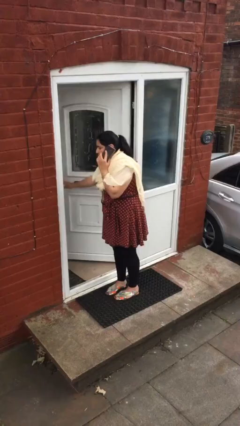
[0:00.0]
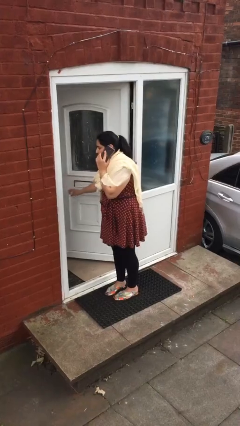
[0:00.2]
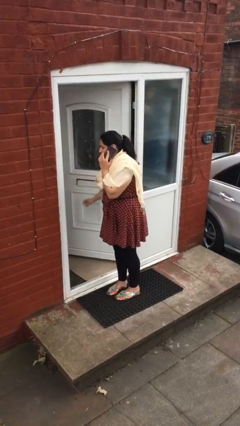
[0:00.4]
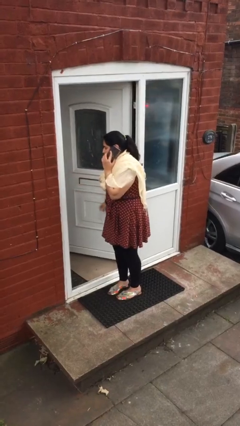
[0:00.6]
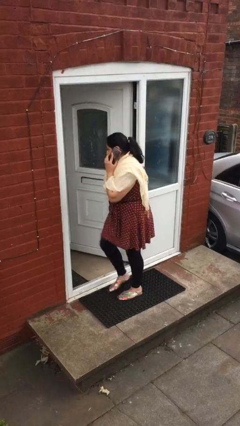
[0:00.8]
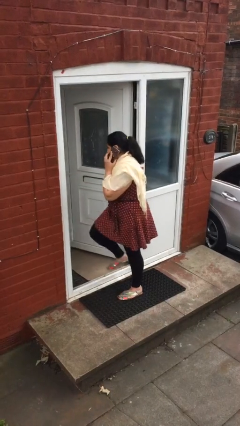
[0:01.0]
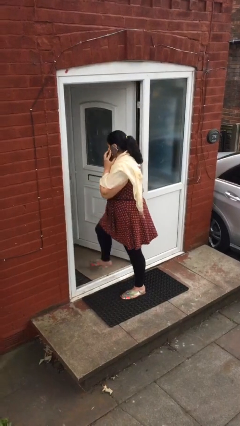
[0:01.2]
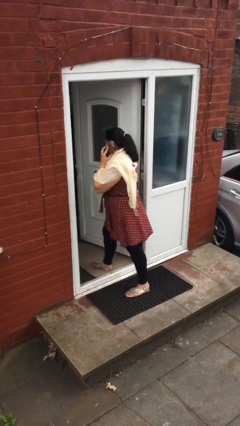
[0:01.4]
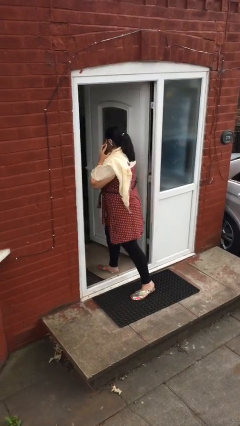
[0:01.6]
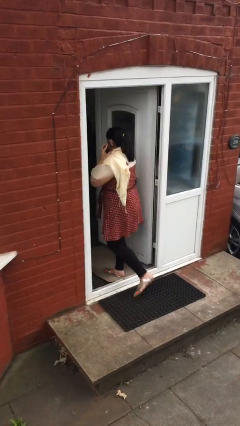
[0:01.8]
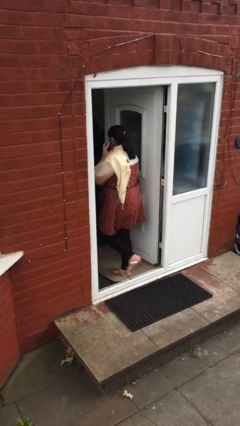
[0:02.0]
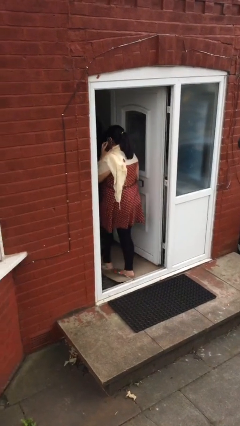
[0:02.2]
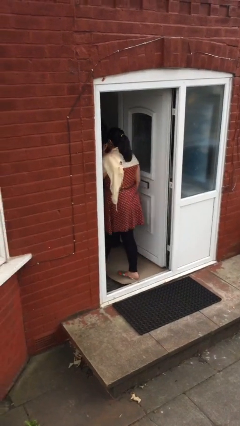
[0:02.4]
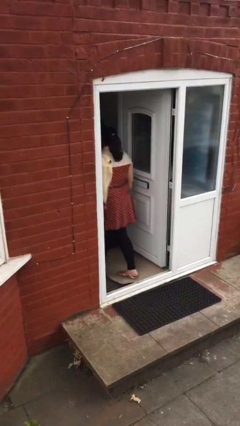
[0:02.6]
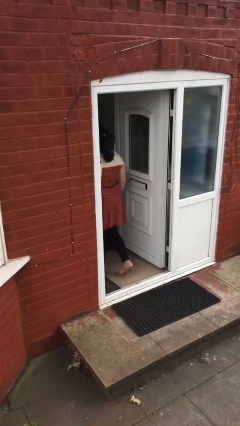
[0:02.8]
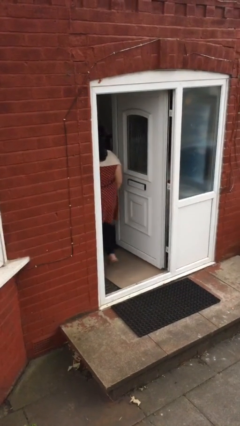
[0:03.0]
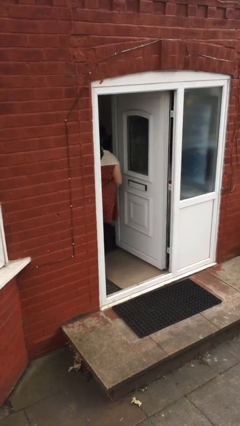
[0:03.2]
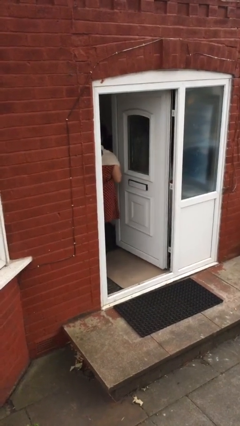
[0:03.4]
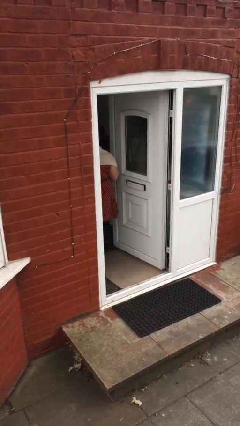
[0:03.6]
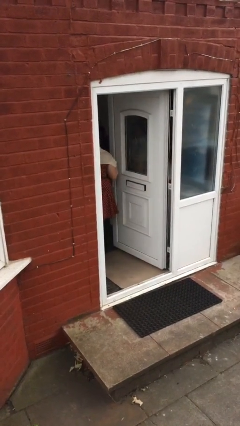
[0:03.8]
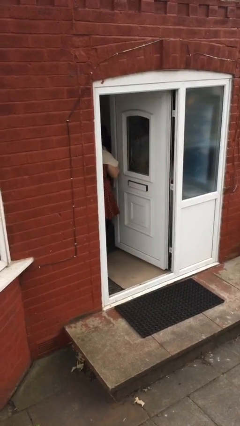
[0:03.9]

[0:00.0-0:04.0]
person exits scene through structure

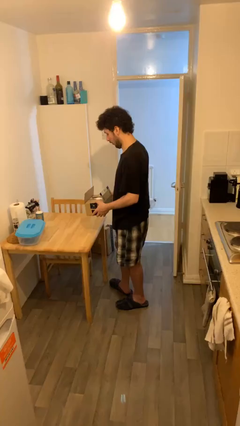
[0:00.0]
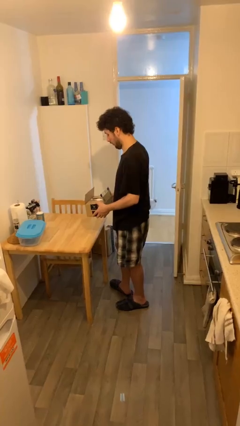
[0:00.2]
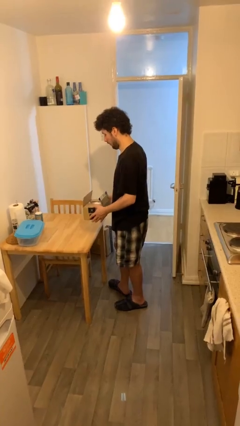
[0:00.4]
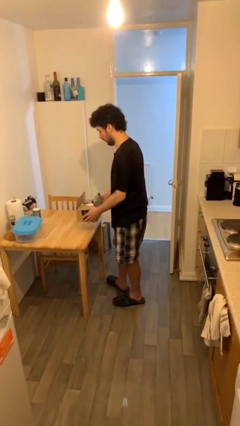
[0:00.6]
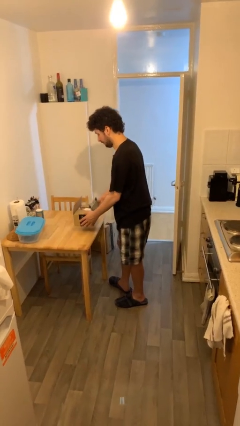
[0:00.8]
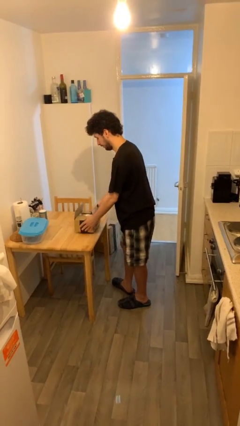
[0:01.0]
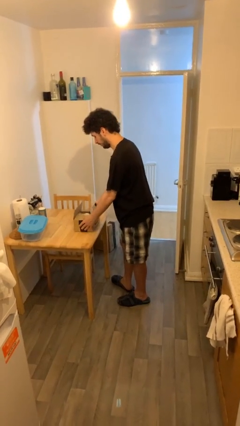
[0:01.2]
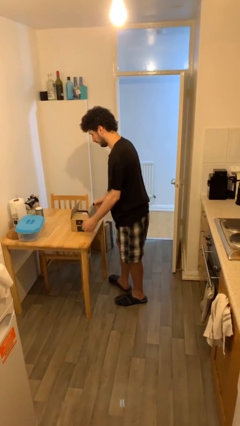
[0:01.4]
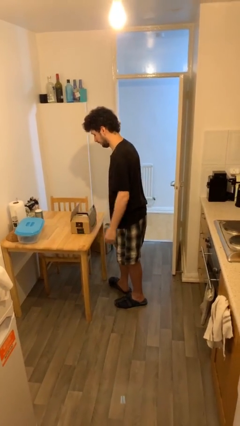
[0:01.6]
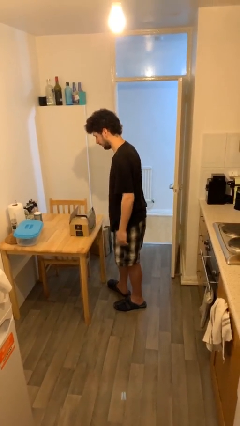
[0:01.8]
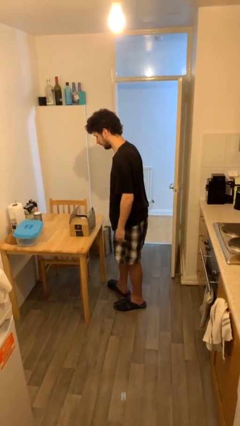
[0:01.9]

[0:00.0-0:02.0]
person puts down object on table

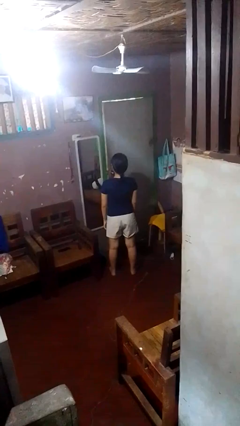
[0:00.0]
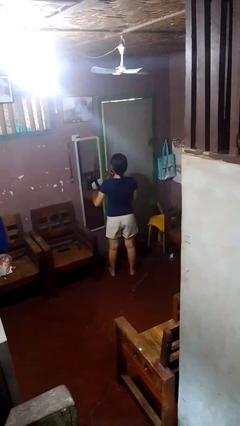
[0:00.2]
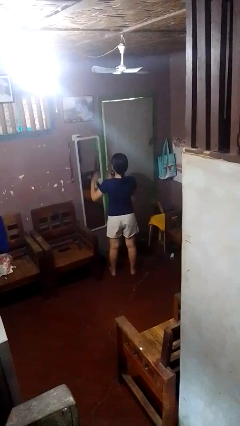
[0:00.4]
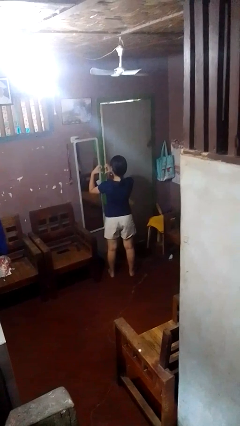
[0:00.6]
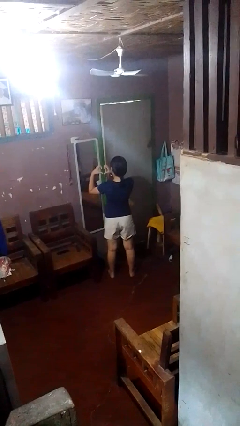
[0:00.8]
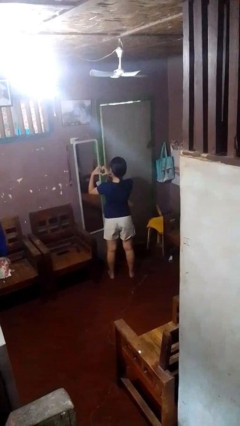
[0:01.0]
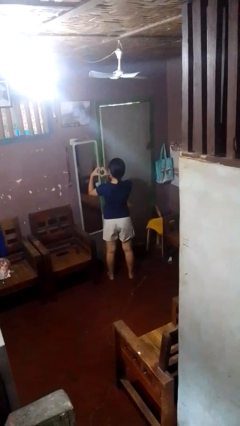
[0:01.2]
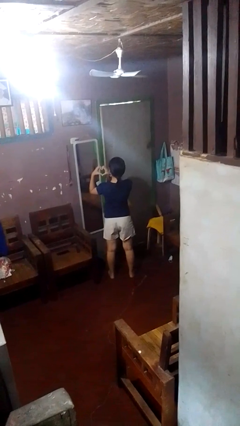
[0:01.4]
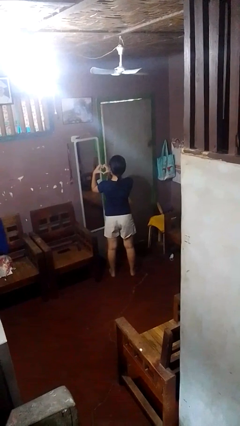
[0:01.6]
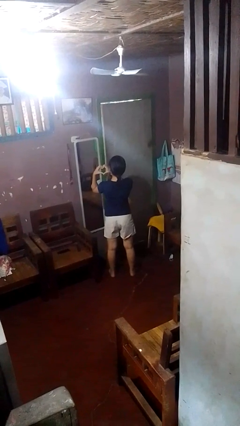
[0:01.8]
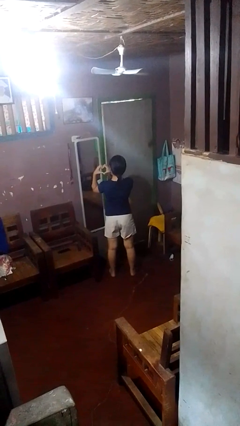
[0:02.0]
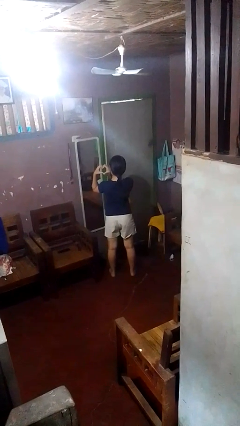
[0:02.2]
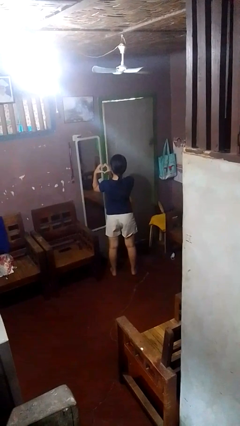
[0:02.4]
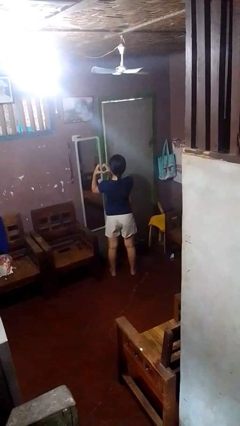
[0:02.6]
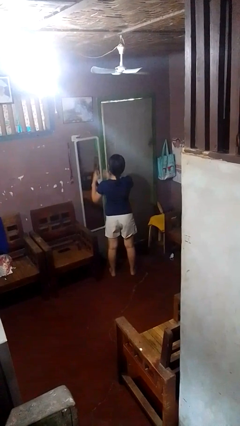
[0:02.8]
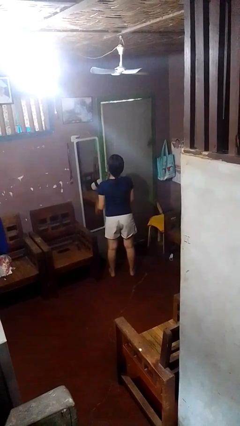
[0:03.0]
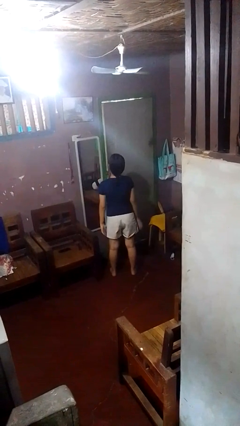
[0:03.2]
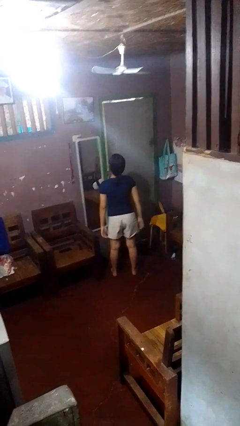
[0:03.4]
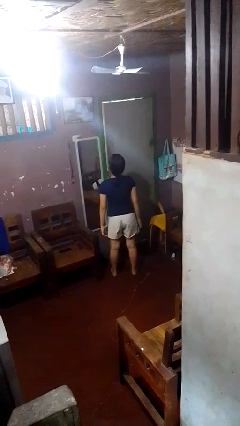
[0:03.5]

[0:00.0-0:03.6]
person gestures heart

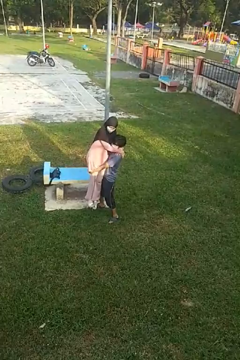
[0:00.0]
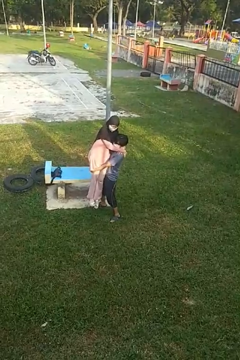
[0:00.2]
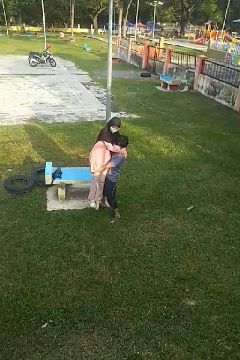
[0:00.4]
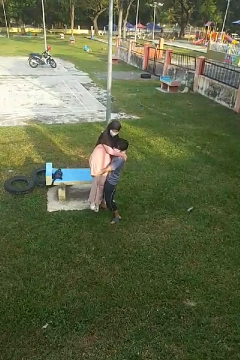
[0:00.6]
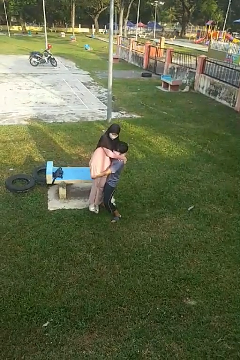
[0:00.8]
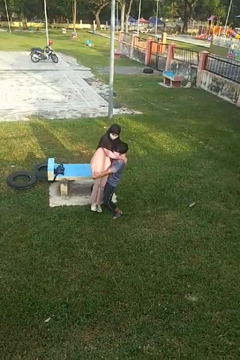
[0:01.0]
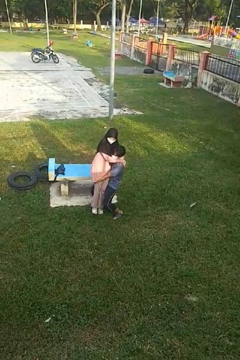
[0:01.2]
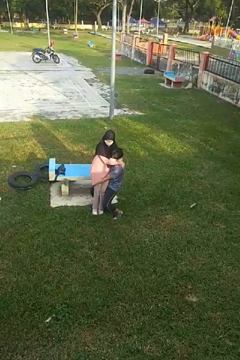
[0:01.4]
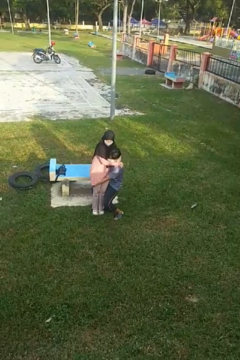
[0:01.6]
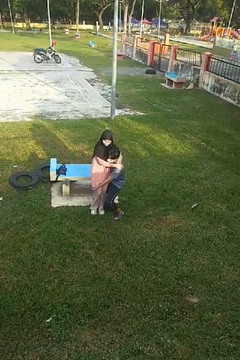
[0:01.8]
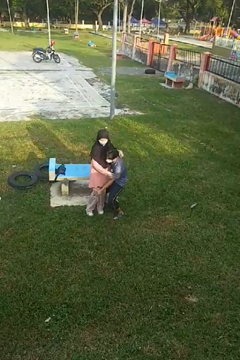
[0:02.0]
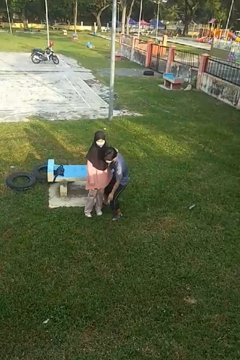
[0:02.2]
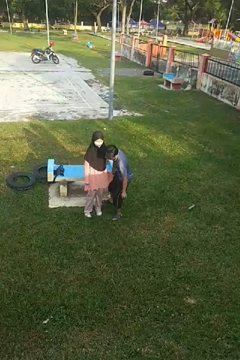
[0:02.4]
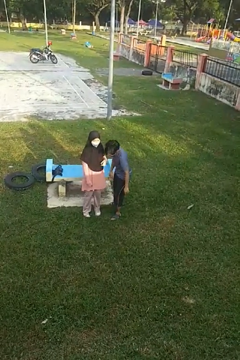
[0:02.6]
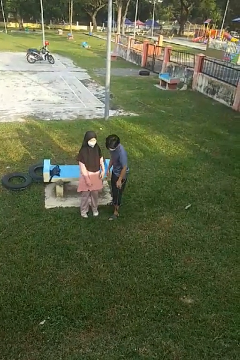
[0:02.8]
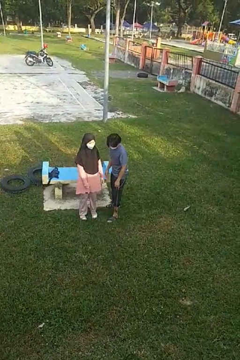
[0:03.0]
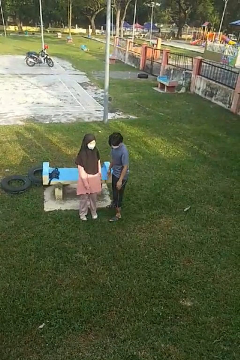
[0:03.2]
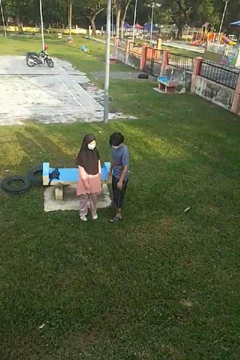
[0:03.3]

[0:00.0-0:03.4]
person puts down person

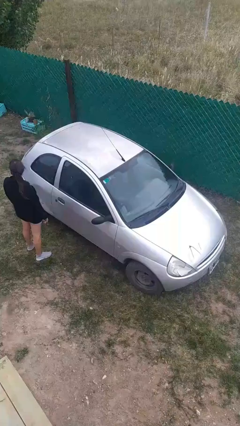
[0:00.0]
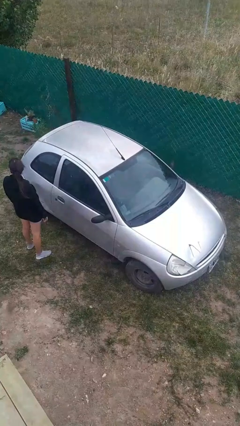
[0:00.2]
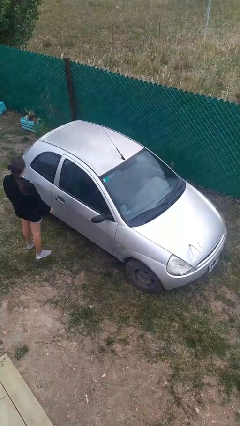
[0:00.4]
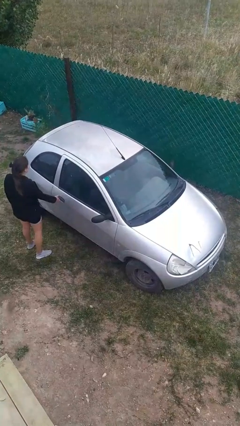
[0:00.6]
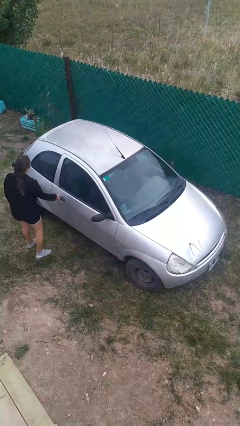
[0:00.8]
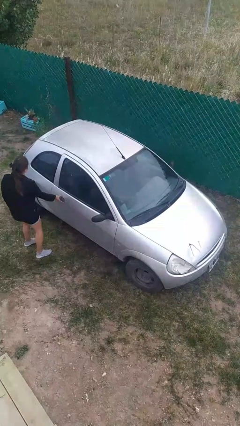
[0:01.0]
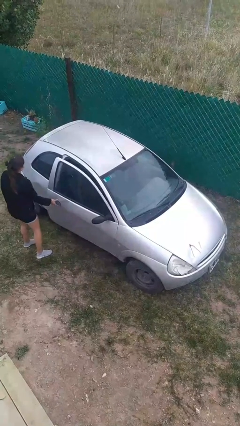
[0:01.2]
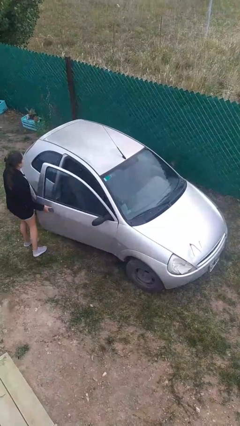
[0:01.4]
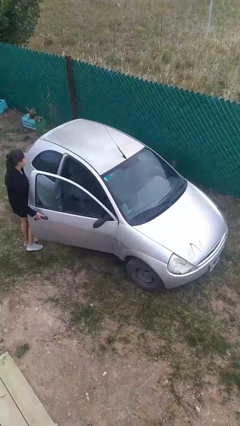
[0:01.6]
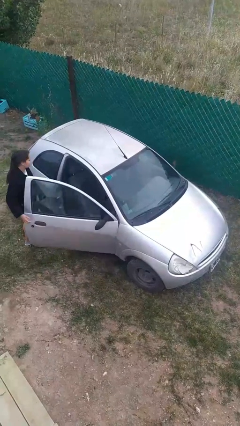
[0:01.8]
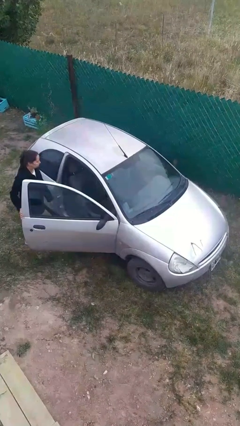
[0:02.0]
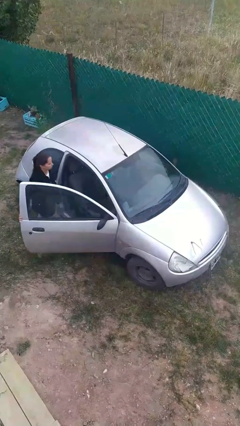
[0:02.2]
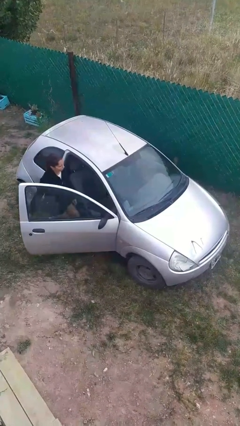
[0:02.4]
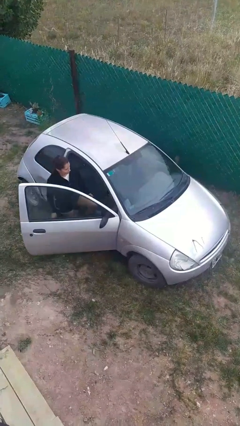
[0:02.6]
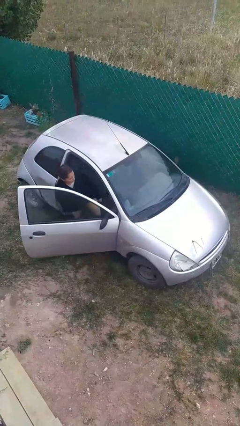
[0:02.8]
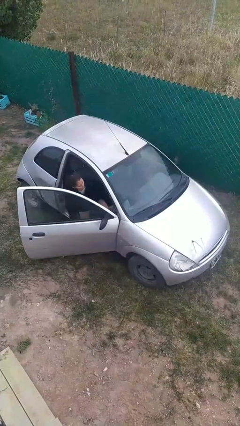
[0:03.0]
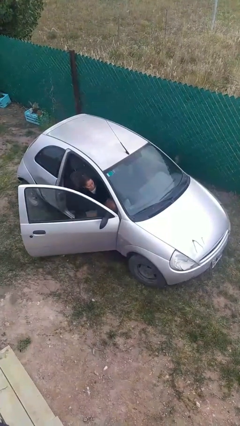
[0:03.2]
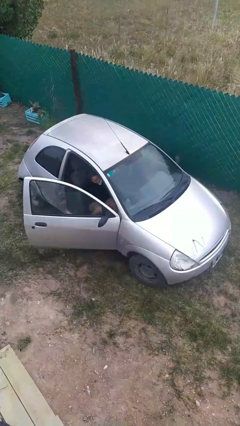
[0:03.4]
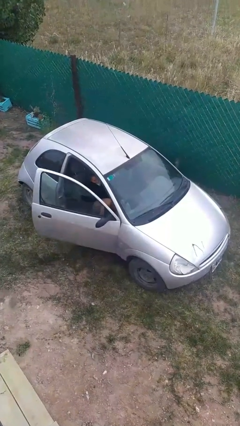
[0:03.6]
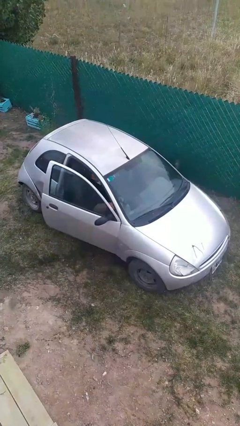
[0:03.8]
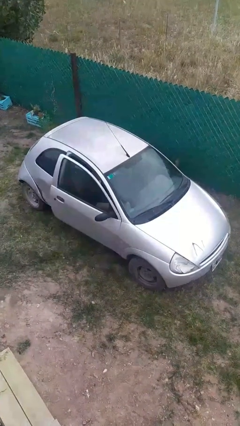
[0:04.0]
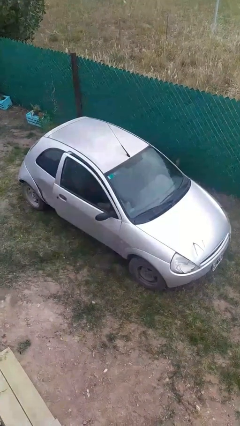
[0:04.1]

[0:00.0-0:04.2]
car picks up person

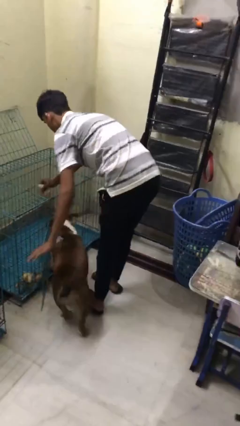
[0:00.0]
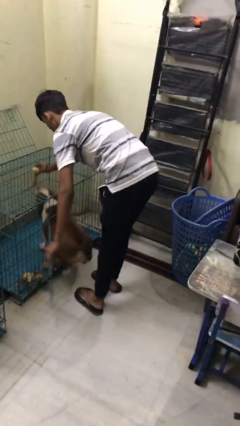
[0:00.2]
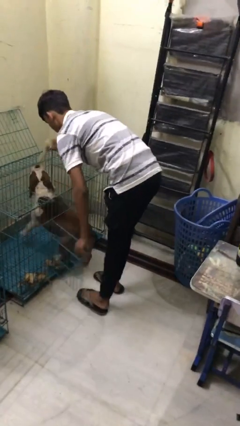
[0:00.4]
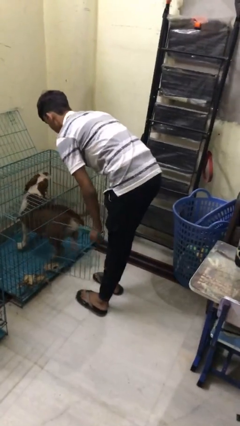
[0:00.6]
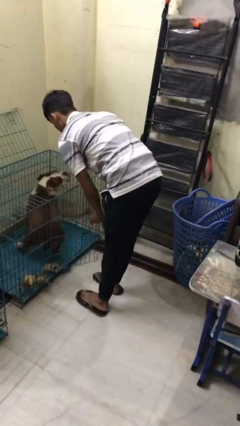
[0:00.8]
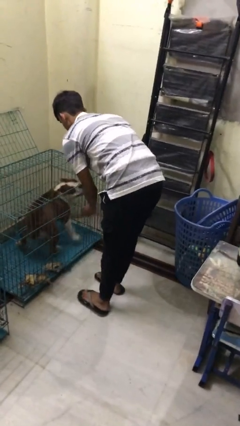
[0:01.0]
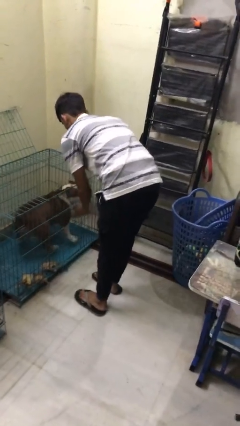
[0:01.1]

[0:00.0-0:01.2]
person crates dog
